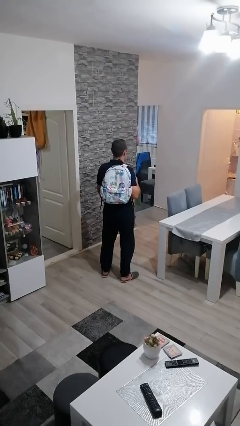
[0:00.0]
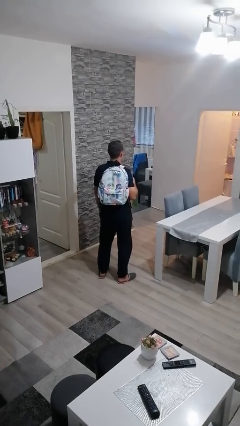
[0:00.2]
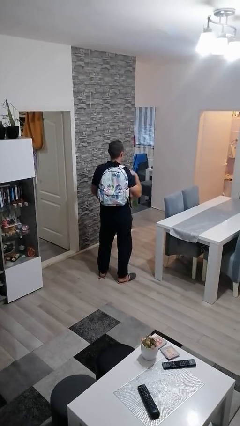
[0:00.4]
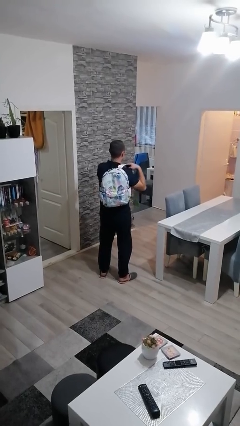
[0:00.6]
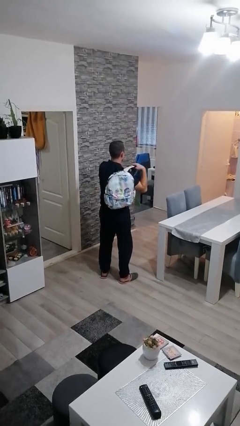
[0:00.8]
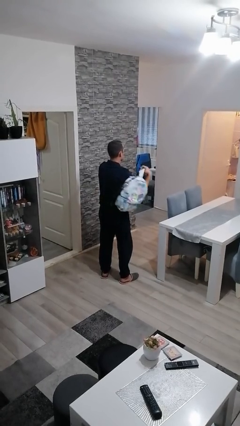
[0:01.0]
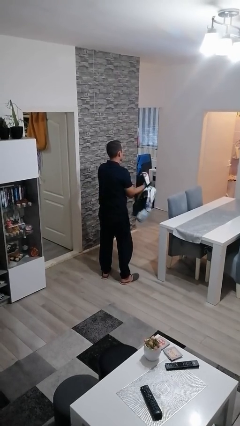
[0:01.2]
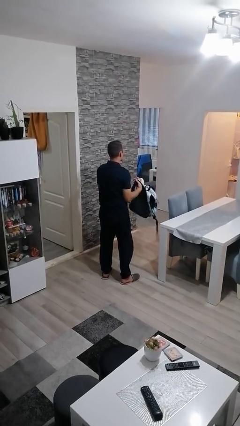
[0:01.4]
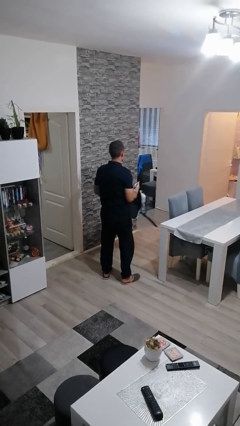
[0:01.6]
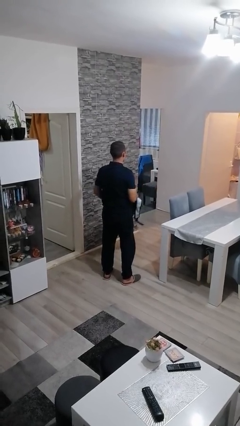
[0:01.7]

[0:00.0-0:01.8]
person takes off backpack

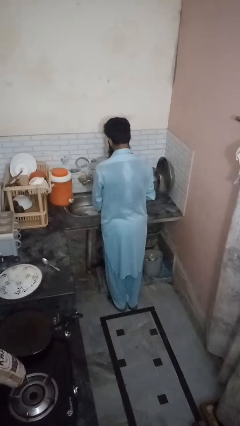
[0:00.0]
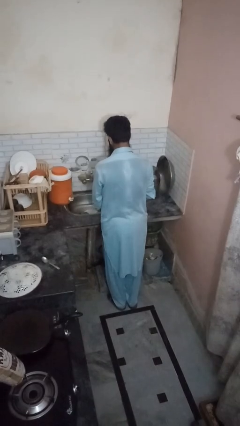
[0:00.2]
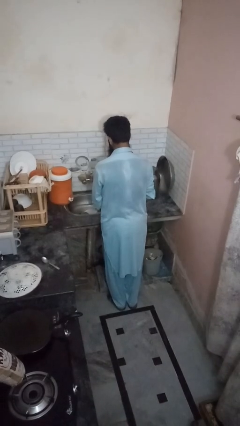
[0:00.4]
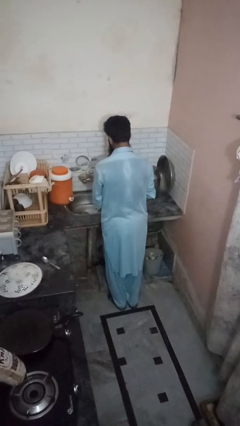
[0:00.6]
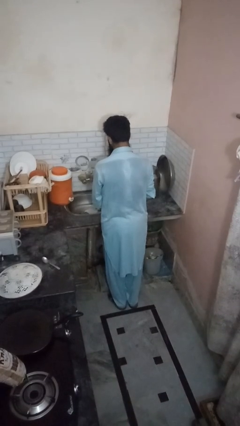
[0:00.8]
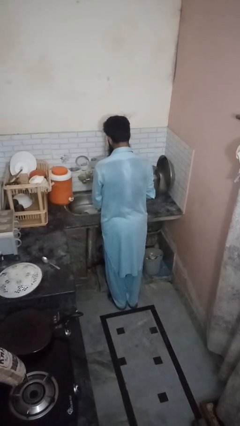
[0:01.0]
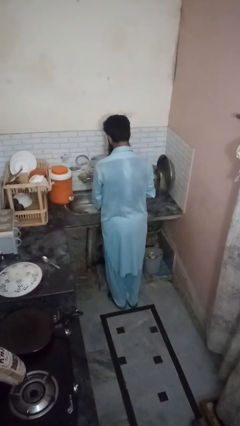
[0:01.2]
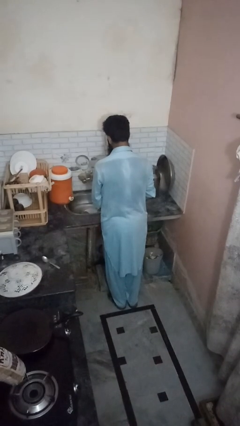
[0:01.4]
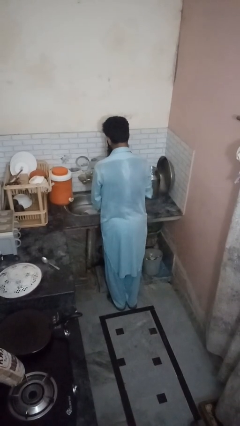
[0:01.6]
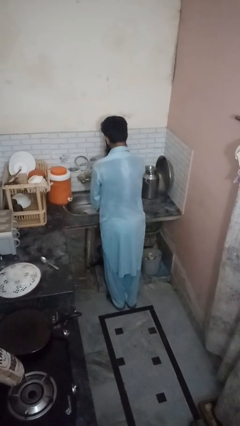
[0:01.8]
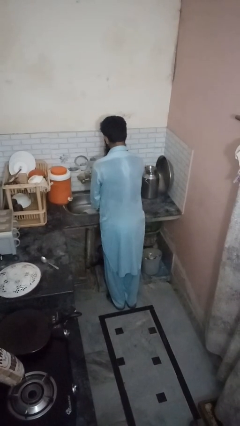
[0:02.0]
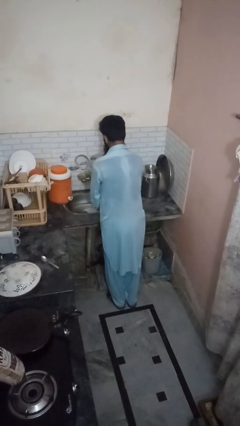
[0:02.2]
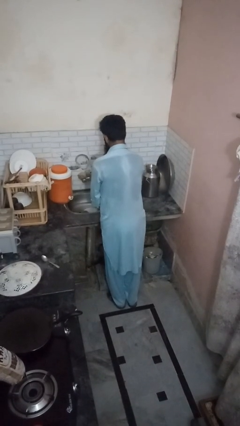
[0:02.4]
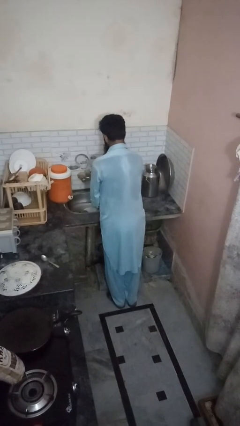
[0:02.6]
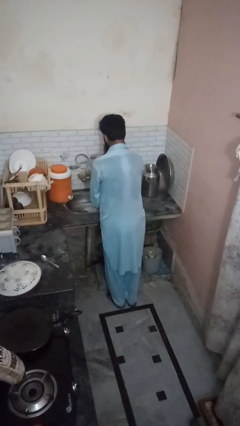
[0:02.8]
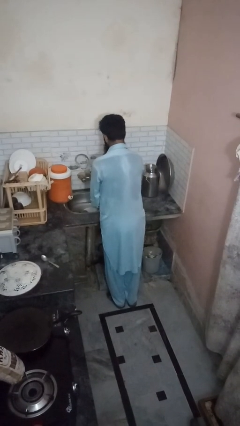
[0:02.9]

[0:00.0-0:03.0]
person closes dishwasher

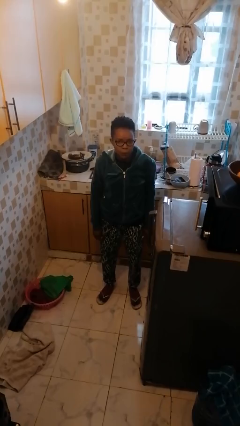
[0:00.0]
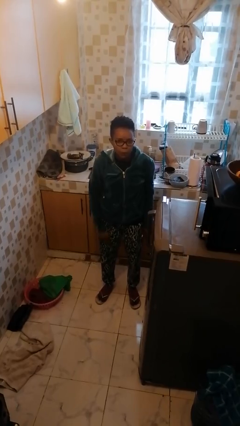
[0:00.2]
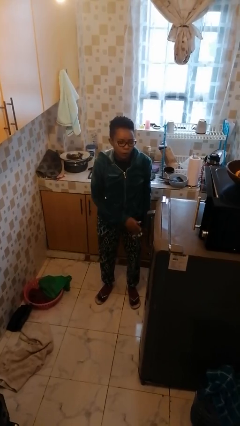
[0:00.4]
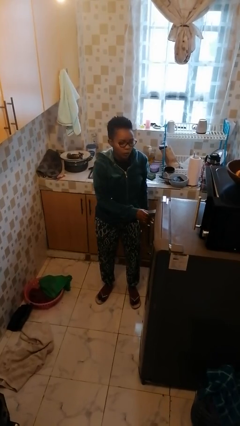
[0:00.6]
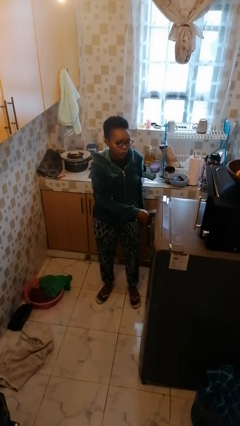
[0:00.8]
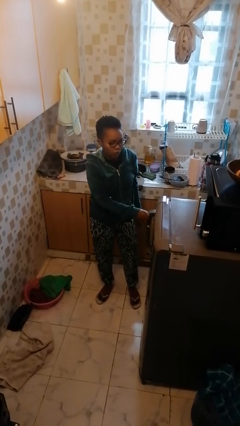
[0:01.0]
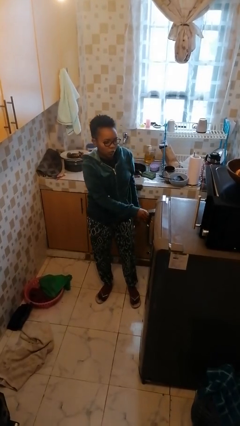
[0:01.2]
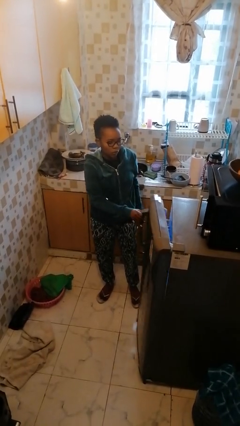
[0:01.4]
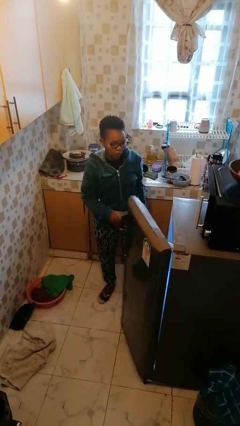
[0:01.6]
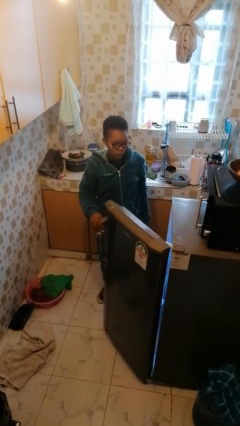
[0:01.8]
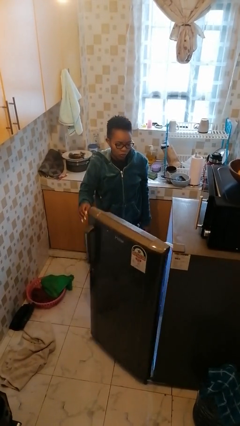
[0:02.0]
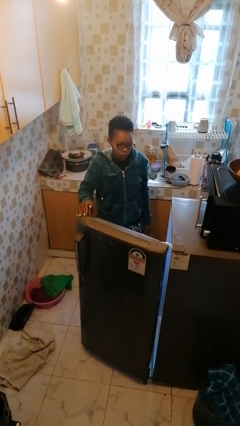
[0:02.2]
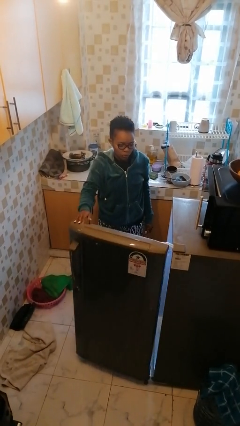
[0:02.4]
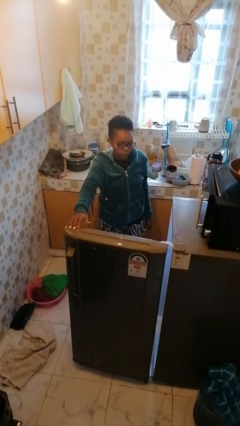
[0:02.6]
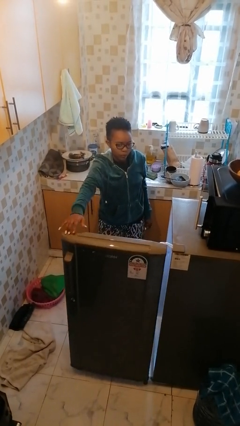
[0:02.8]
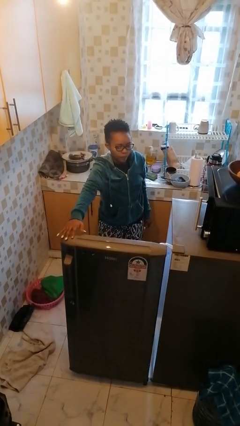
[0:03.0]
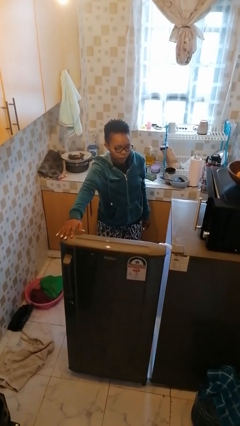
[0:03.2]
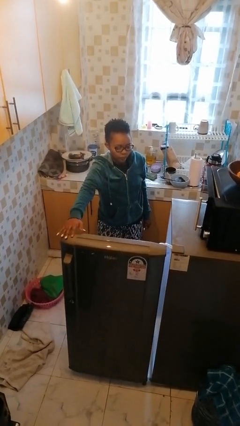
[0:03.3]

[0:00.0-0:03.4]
person opens refrigerator

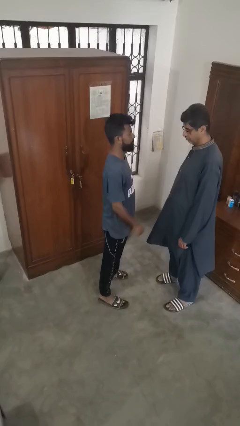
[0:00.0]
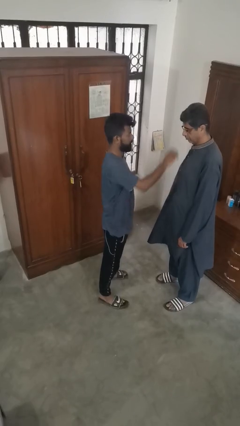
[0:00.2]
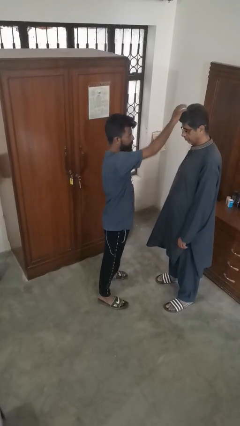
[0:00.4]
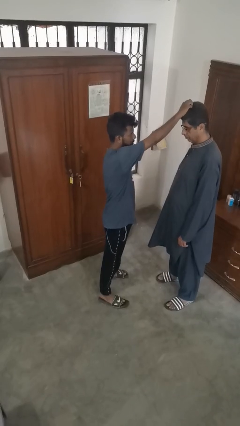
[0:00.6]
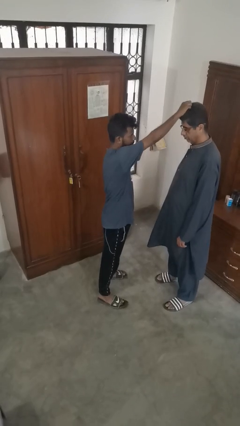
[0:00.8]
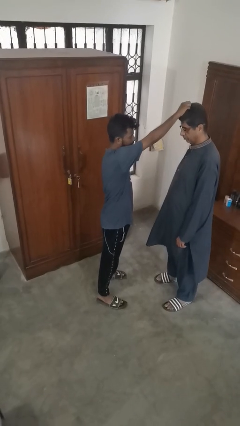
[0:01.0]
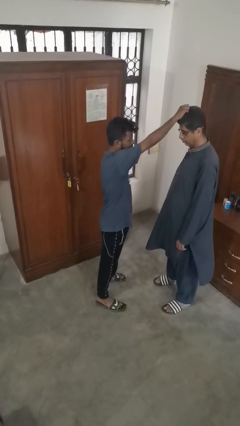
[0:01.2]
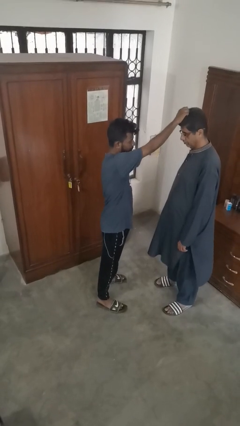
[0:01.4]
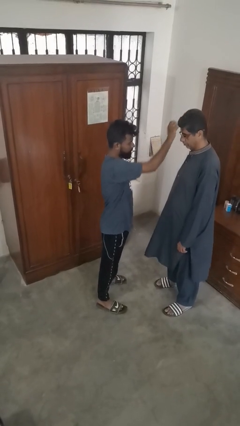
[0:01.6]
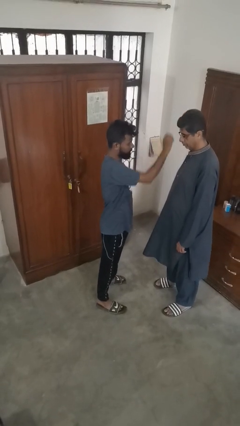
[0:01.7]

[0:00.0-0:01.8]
person grabs person by hair

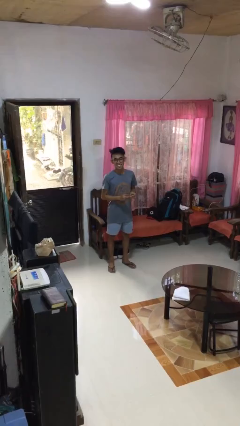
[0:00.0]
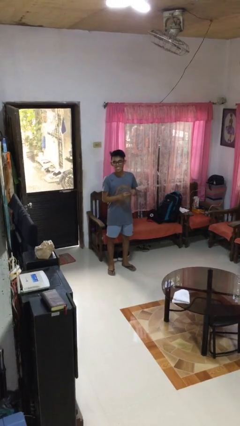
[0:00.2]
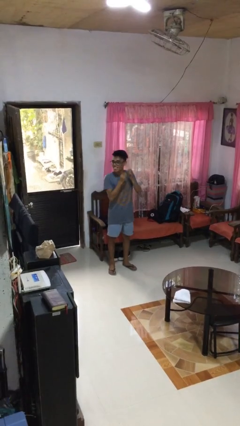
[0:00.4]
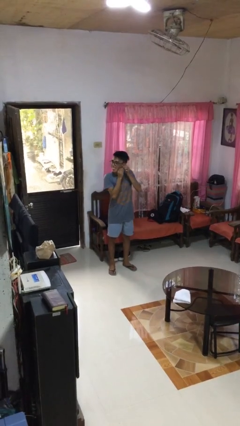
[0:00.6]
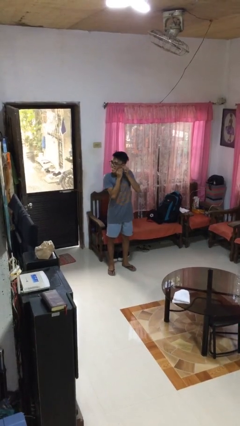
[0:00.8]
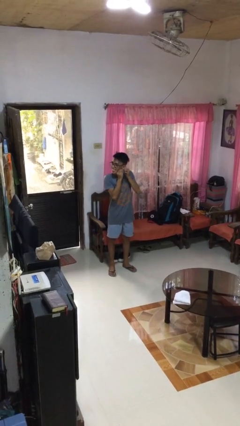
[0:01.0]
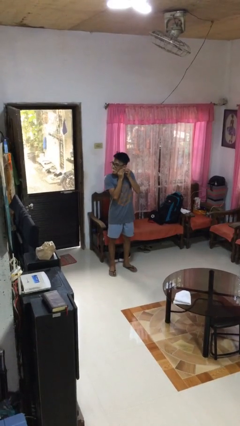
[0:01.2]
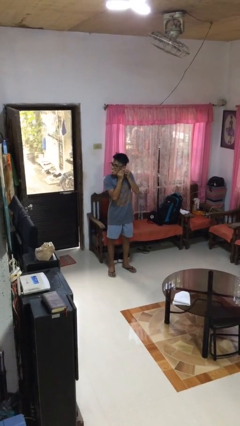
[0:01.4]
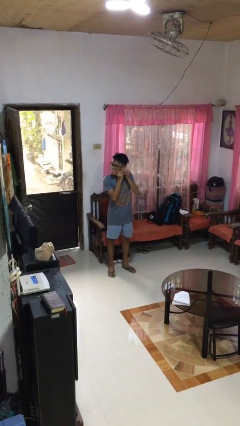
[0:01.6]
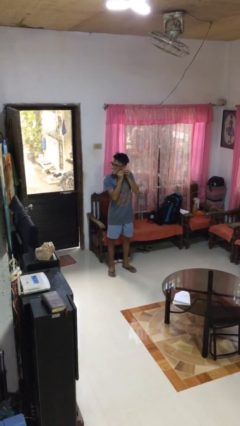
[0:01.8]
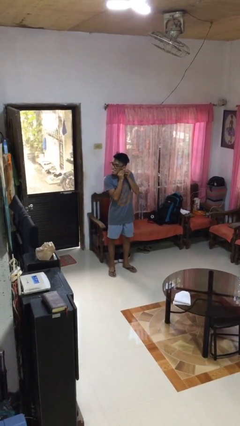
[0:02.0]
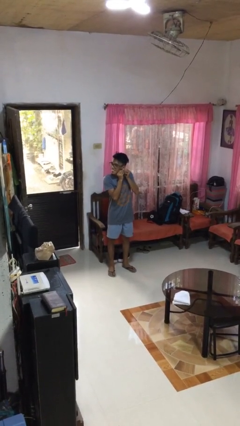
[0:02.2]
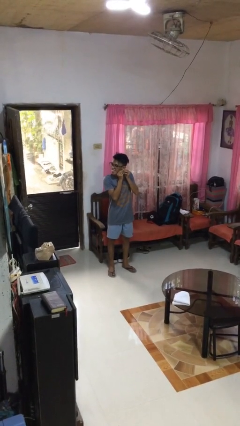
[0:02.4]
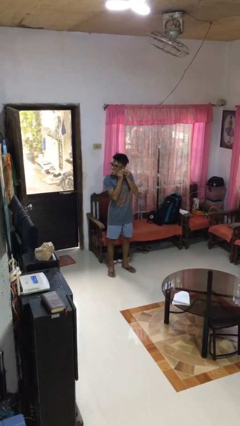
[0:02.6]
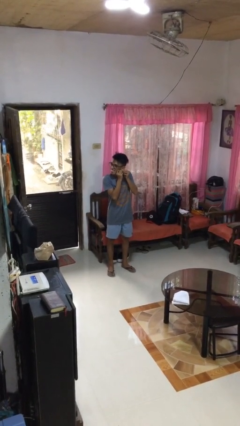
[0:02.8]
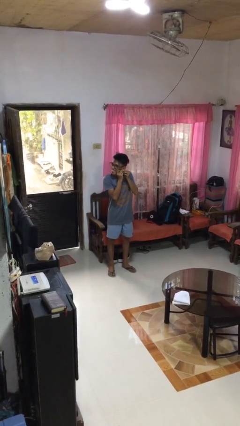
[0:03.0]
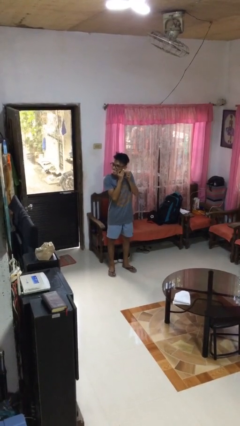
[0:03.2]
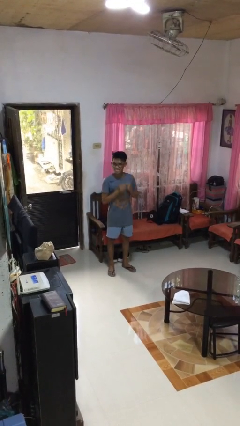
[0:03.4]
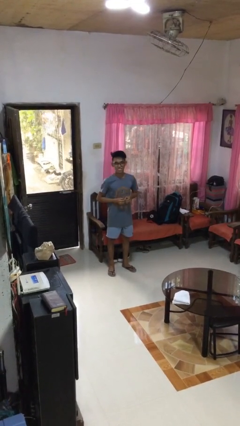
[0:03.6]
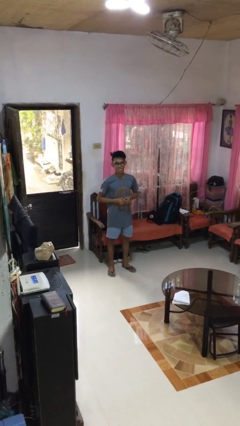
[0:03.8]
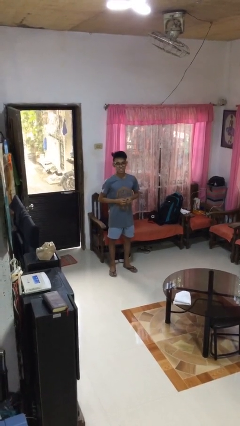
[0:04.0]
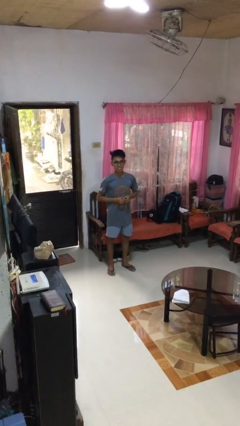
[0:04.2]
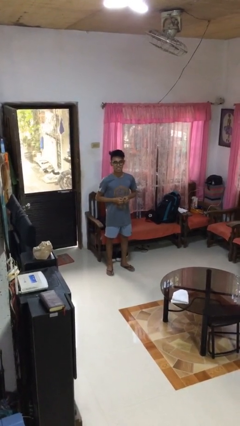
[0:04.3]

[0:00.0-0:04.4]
person puts on earrings

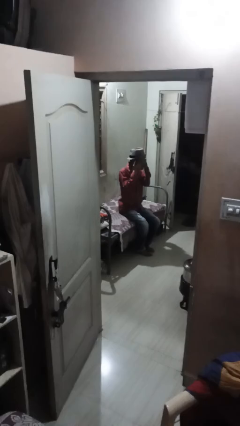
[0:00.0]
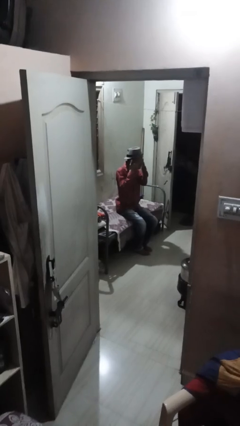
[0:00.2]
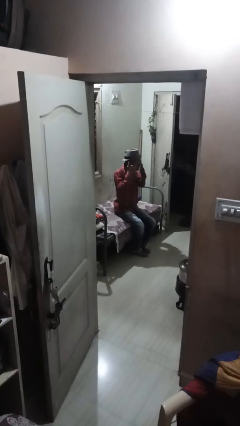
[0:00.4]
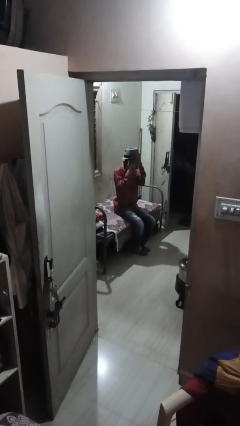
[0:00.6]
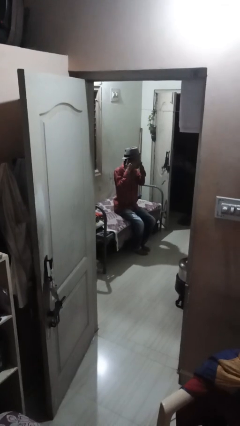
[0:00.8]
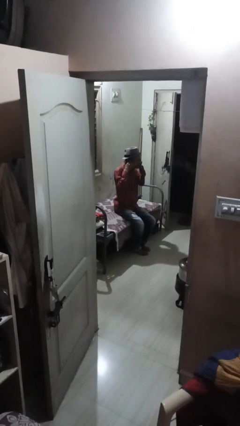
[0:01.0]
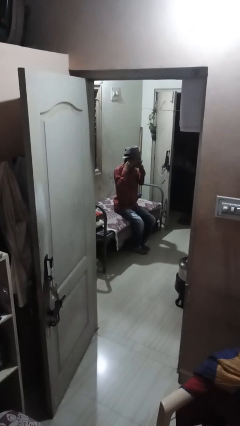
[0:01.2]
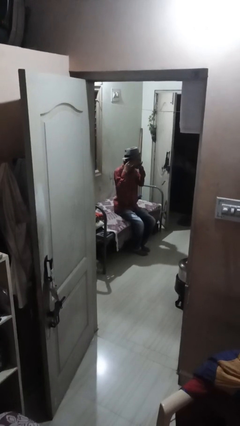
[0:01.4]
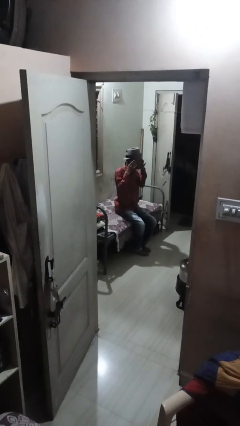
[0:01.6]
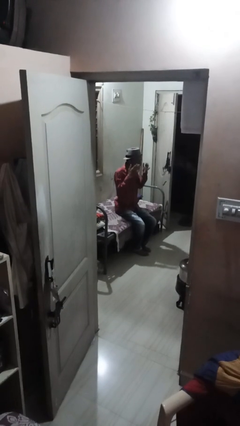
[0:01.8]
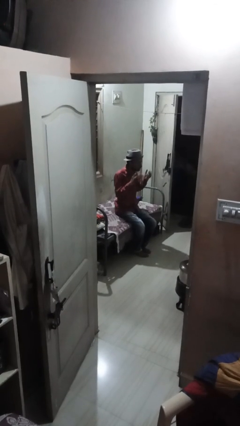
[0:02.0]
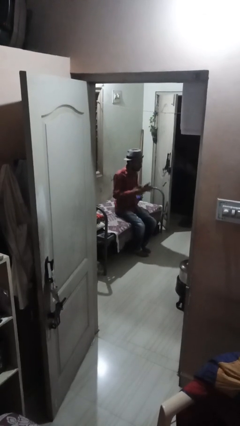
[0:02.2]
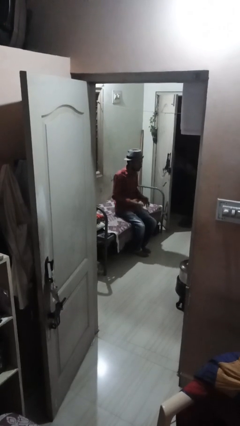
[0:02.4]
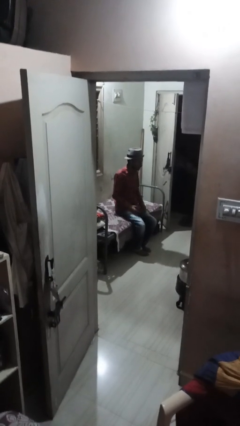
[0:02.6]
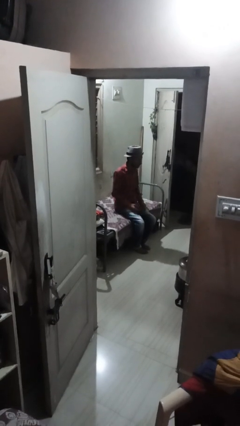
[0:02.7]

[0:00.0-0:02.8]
person rubs eyes

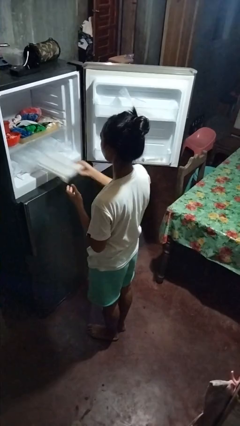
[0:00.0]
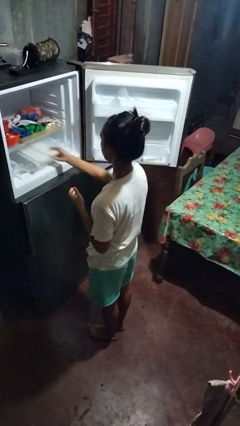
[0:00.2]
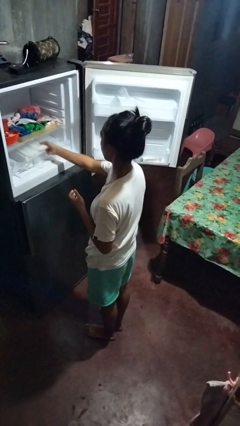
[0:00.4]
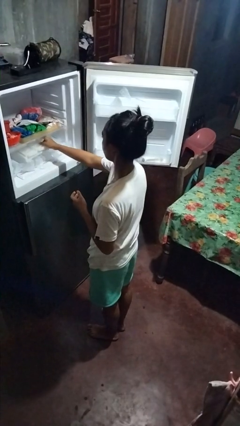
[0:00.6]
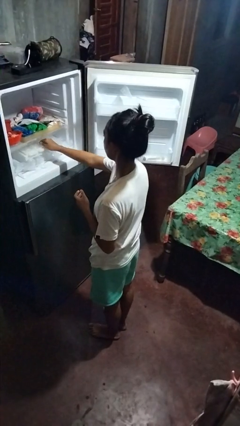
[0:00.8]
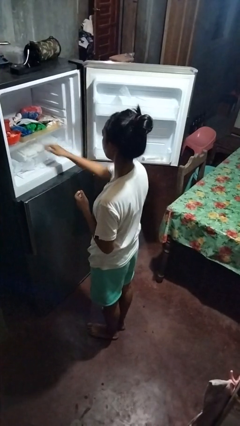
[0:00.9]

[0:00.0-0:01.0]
person puts object into refrigerator
